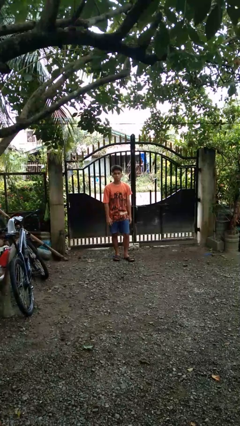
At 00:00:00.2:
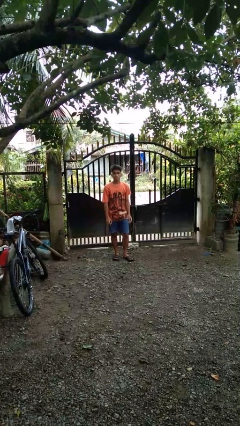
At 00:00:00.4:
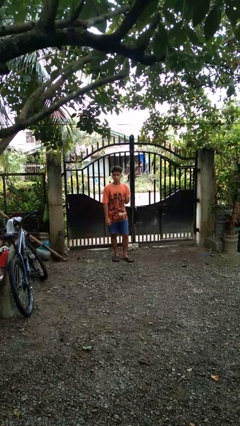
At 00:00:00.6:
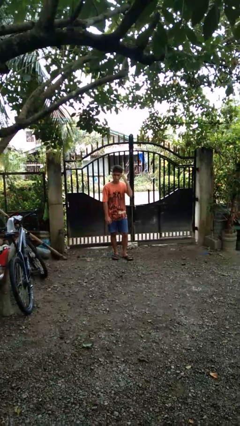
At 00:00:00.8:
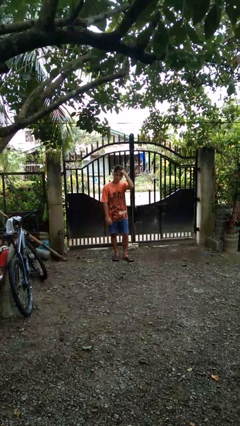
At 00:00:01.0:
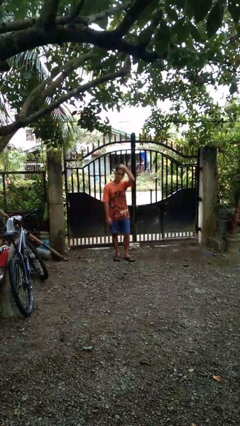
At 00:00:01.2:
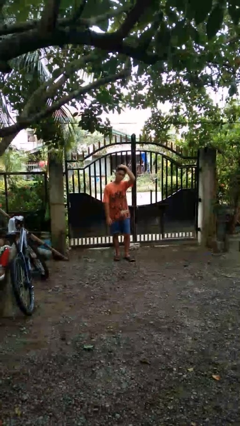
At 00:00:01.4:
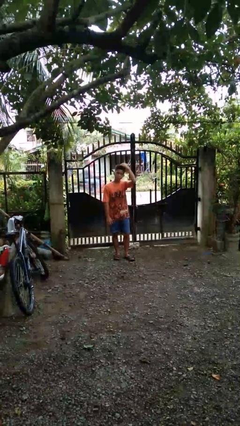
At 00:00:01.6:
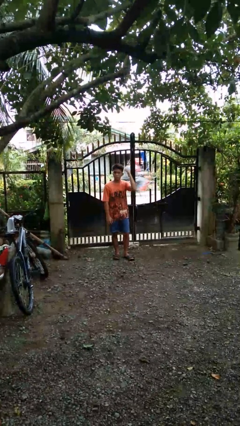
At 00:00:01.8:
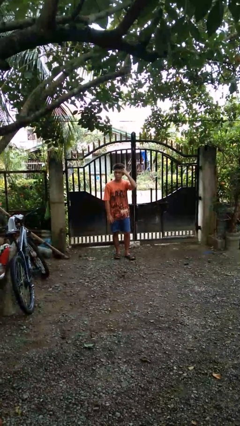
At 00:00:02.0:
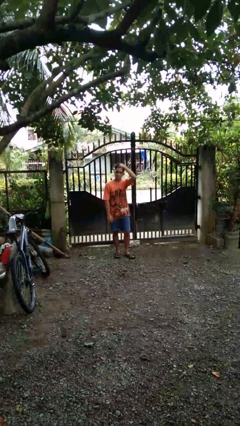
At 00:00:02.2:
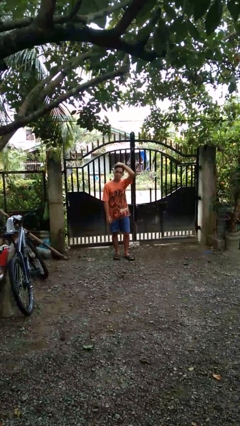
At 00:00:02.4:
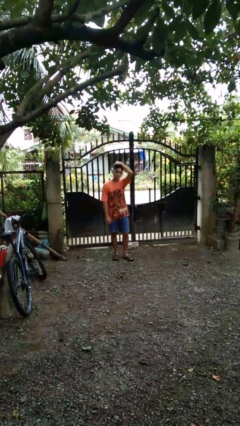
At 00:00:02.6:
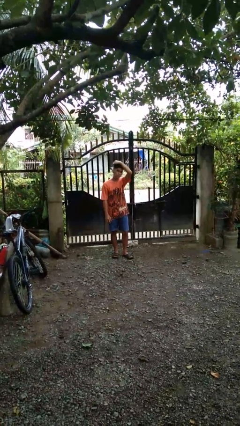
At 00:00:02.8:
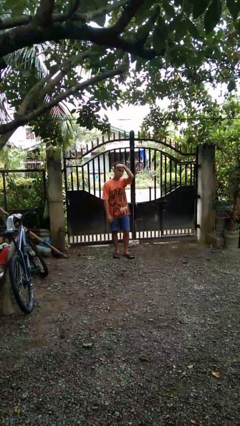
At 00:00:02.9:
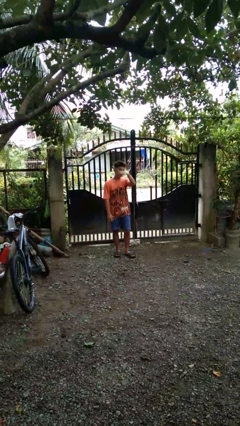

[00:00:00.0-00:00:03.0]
person strokes hair

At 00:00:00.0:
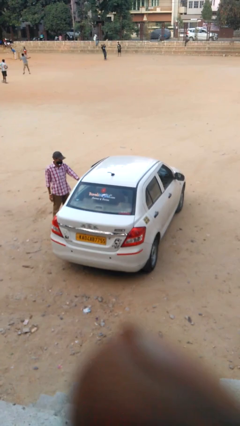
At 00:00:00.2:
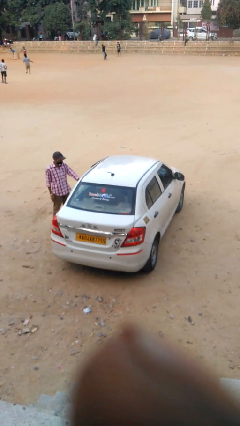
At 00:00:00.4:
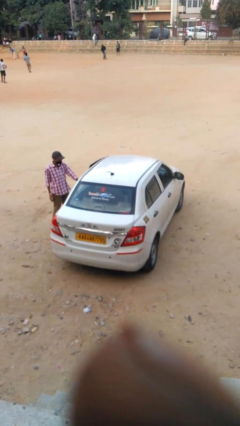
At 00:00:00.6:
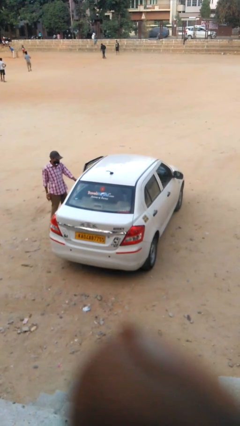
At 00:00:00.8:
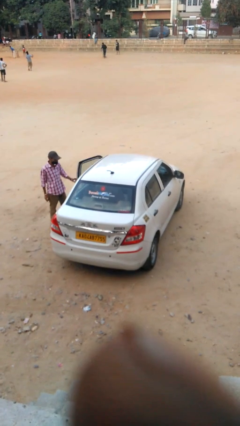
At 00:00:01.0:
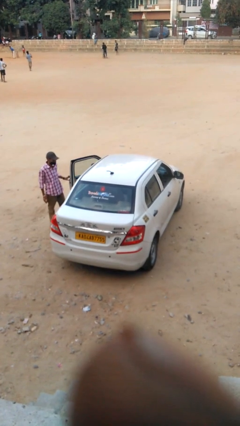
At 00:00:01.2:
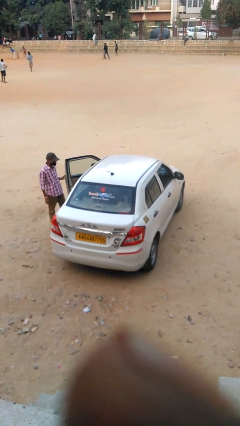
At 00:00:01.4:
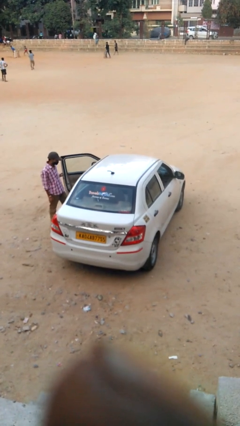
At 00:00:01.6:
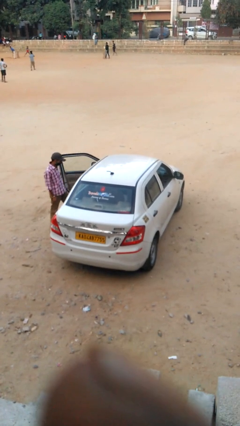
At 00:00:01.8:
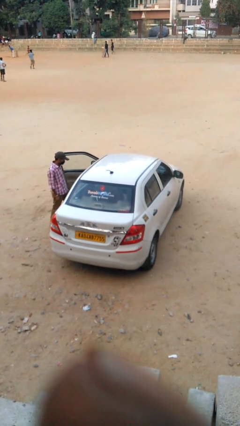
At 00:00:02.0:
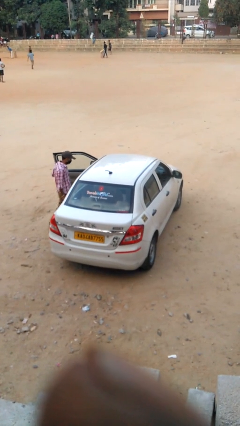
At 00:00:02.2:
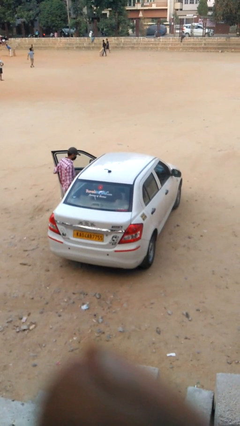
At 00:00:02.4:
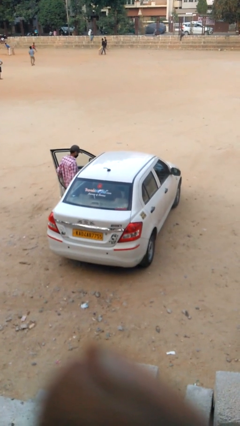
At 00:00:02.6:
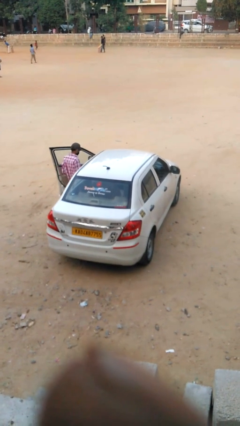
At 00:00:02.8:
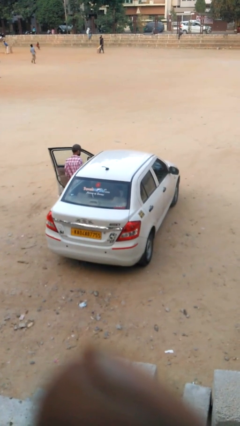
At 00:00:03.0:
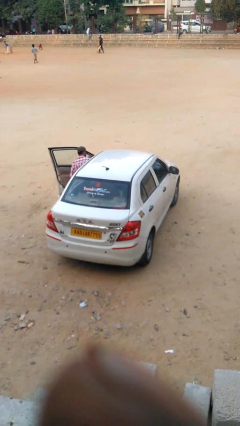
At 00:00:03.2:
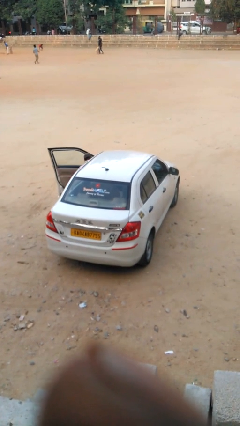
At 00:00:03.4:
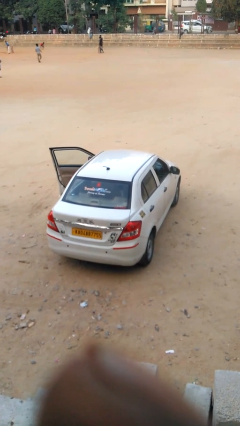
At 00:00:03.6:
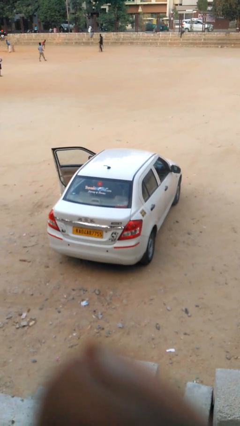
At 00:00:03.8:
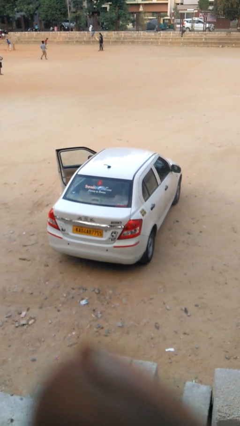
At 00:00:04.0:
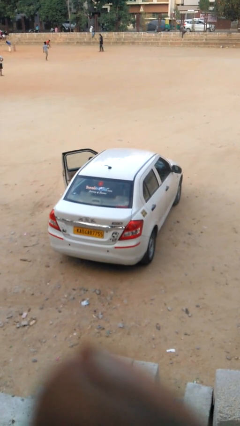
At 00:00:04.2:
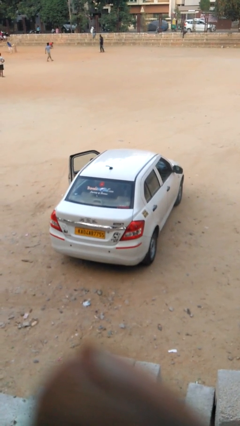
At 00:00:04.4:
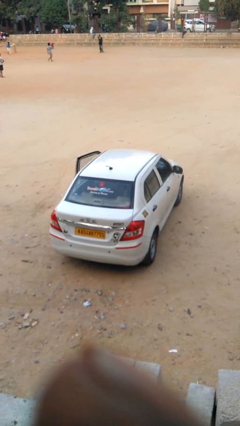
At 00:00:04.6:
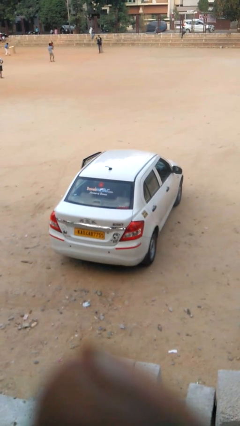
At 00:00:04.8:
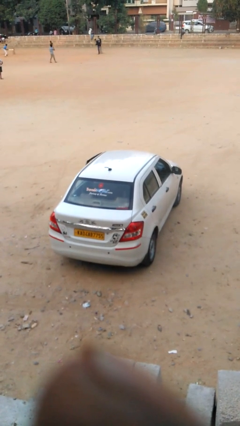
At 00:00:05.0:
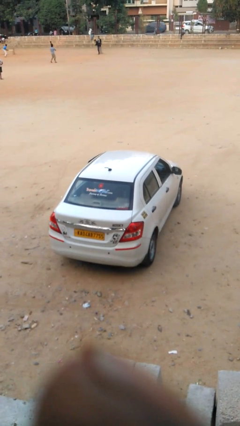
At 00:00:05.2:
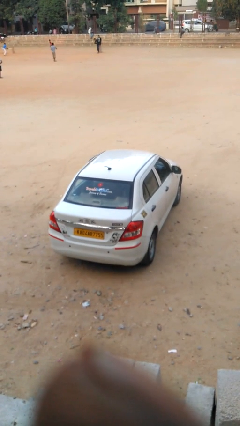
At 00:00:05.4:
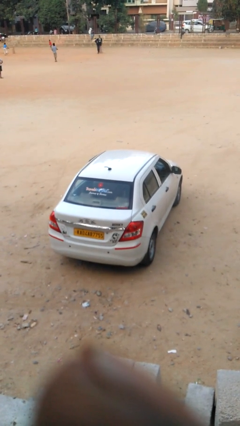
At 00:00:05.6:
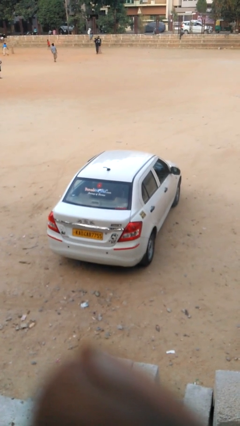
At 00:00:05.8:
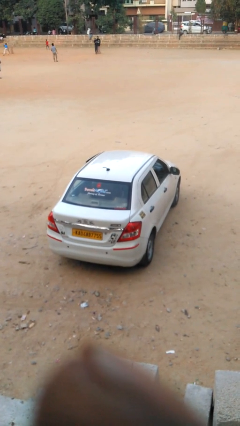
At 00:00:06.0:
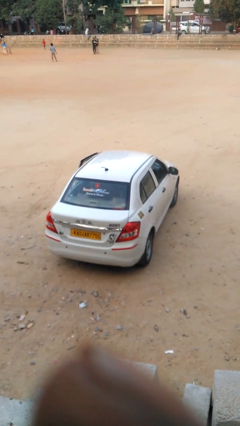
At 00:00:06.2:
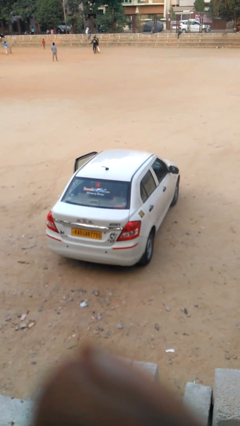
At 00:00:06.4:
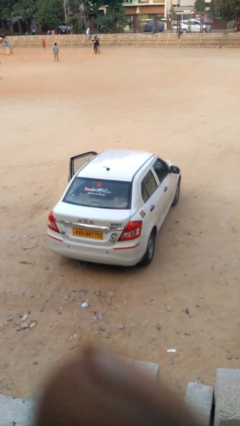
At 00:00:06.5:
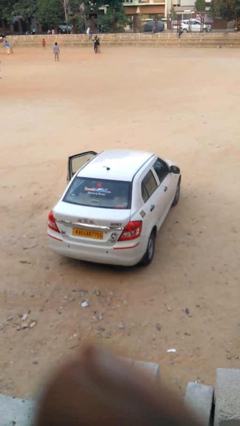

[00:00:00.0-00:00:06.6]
car picks up person

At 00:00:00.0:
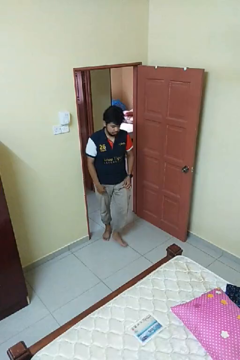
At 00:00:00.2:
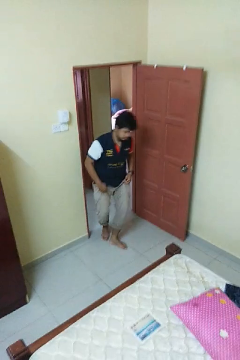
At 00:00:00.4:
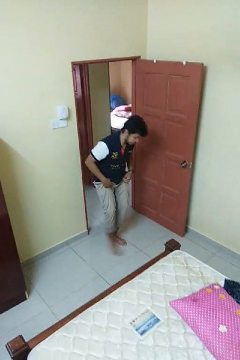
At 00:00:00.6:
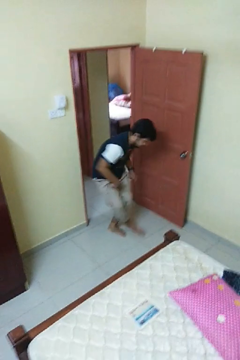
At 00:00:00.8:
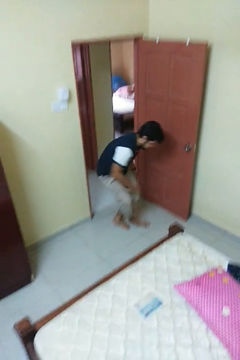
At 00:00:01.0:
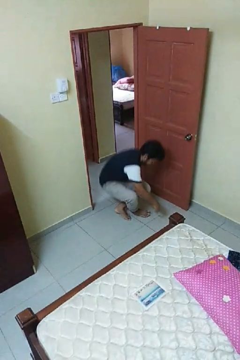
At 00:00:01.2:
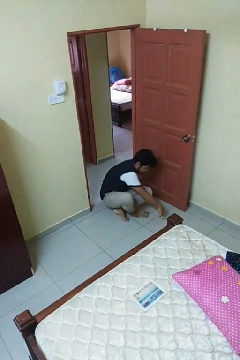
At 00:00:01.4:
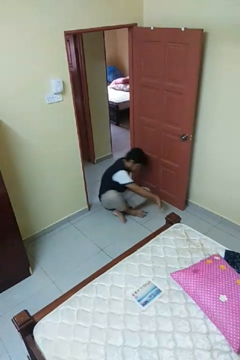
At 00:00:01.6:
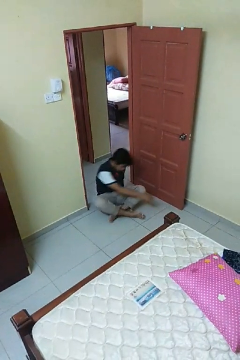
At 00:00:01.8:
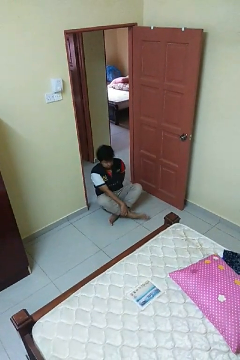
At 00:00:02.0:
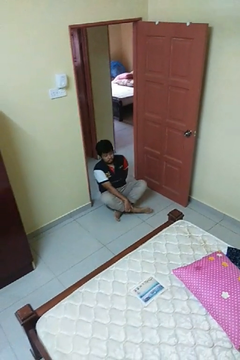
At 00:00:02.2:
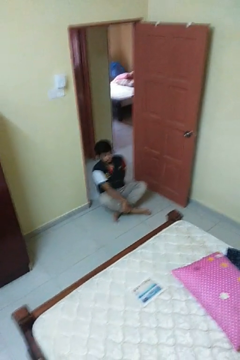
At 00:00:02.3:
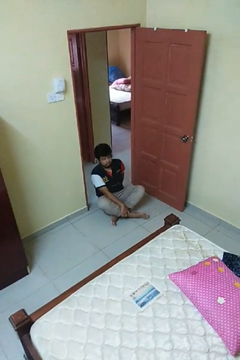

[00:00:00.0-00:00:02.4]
person sits crisscross

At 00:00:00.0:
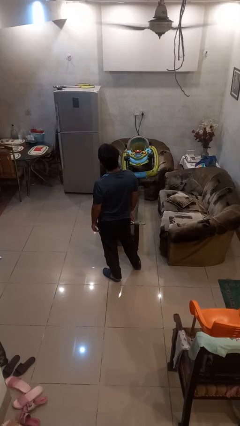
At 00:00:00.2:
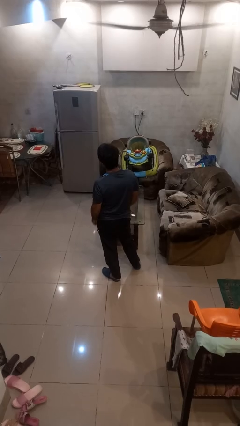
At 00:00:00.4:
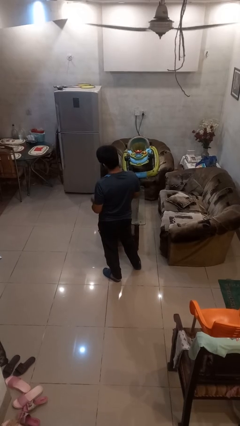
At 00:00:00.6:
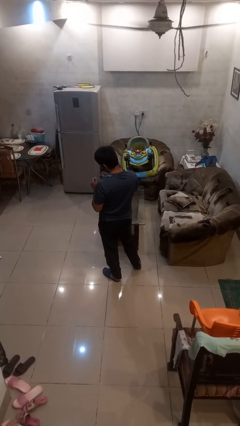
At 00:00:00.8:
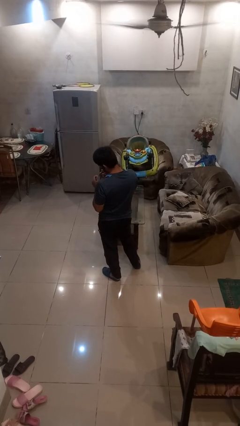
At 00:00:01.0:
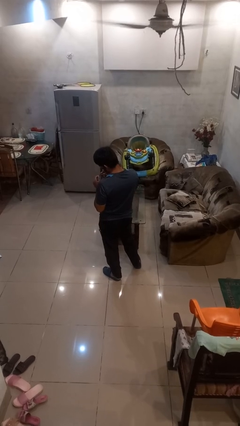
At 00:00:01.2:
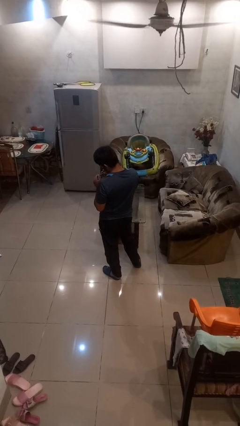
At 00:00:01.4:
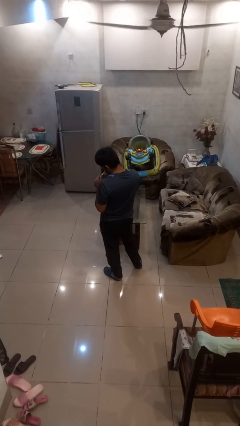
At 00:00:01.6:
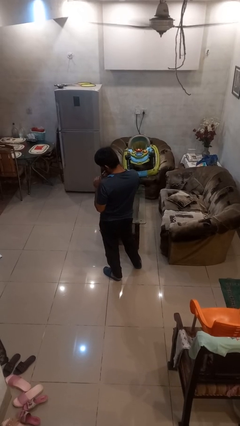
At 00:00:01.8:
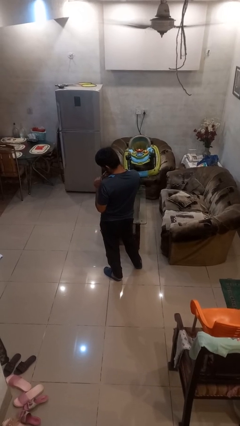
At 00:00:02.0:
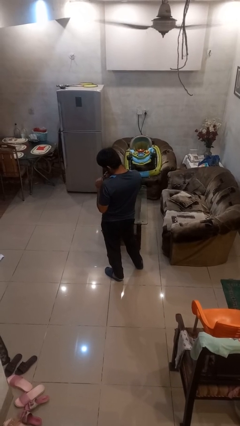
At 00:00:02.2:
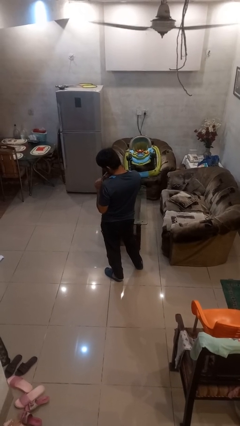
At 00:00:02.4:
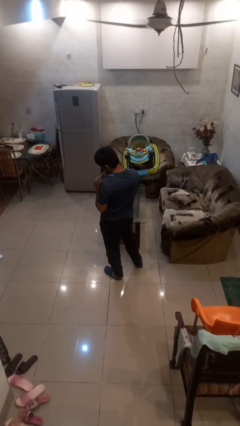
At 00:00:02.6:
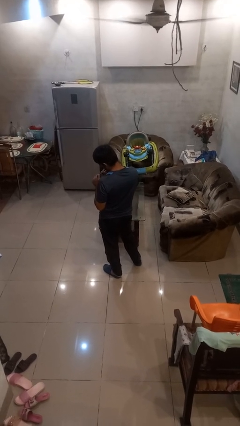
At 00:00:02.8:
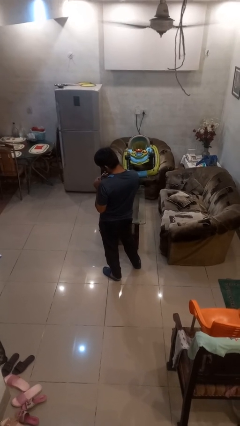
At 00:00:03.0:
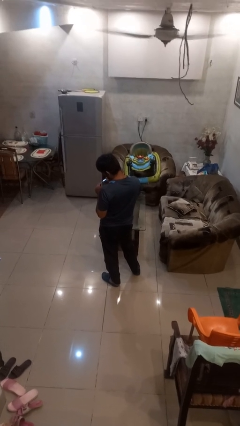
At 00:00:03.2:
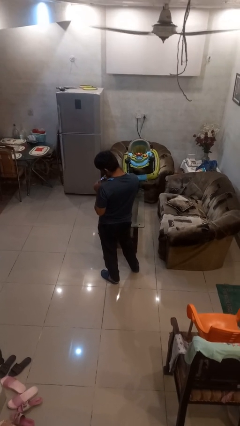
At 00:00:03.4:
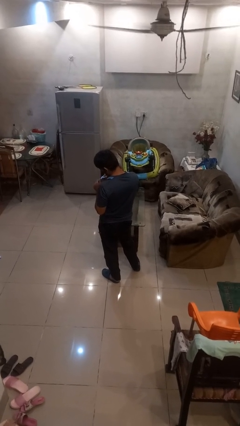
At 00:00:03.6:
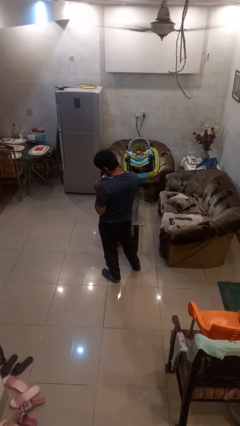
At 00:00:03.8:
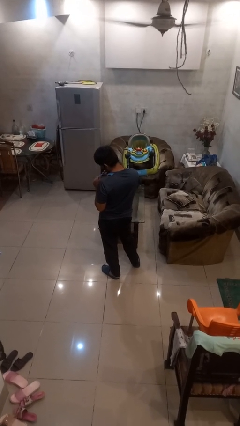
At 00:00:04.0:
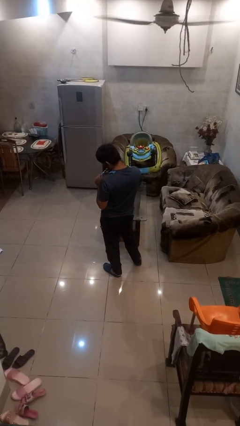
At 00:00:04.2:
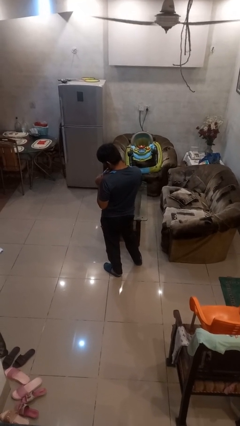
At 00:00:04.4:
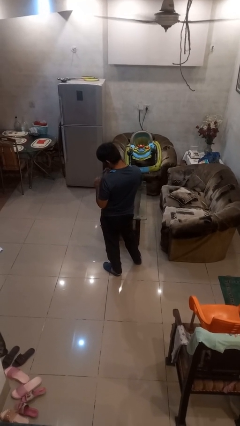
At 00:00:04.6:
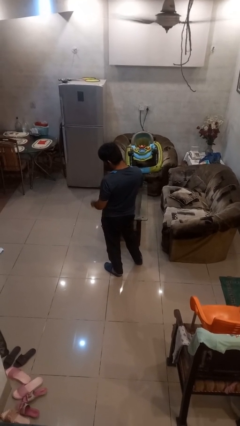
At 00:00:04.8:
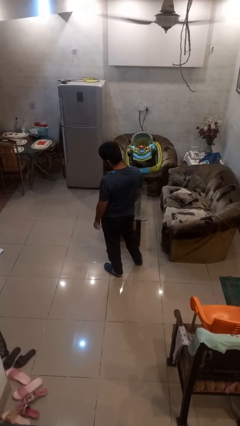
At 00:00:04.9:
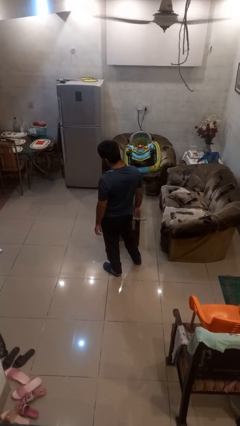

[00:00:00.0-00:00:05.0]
person clips fingernails

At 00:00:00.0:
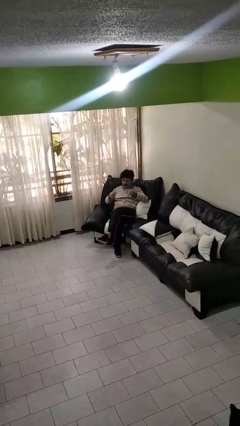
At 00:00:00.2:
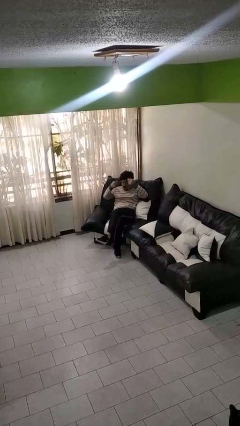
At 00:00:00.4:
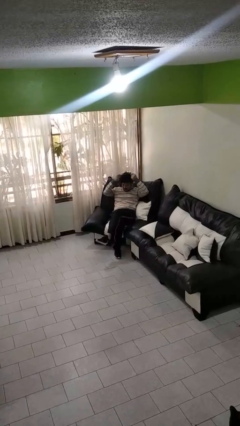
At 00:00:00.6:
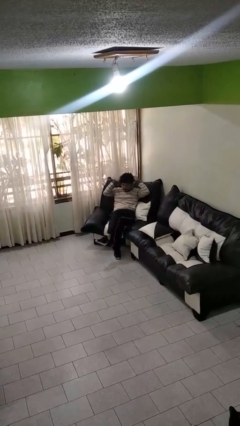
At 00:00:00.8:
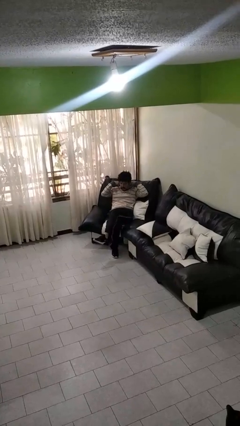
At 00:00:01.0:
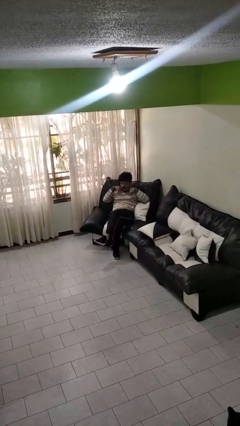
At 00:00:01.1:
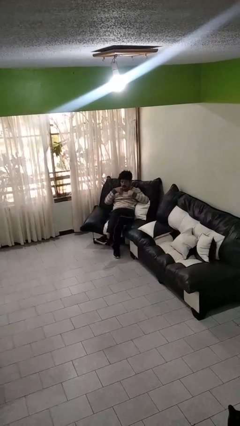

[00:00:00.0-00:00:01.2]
person puts on necklace
